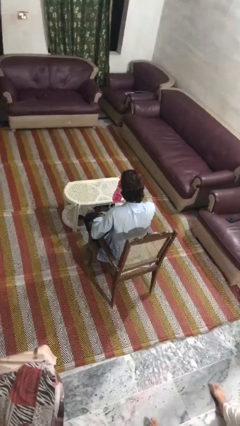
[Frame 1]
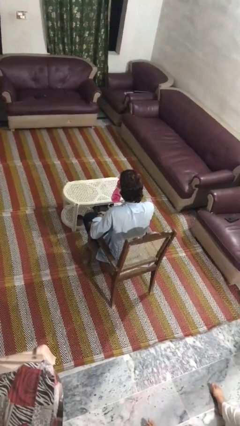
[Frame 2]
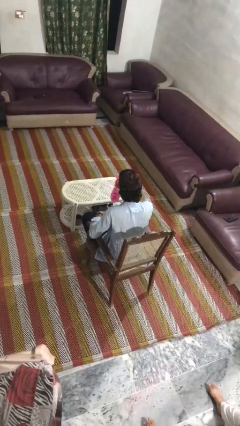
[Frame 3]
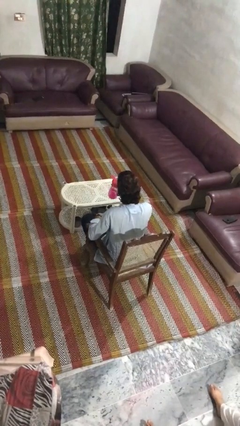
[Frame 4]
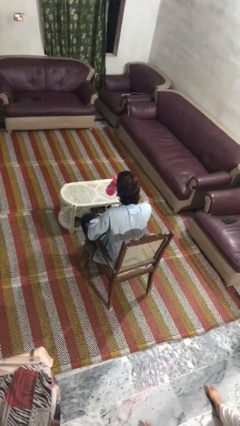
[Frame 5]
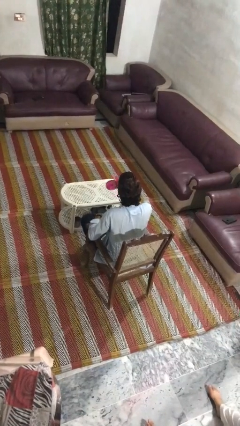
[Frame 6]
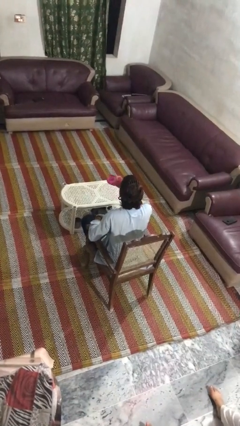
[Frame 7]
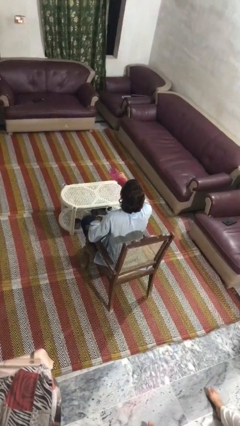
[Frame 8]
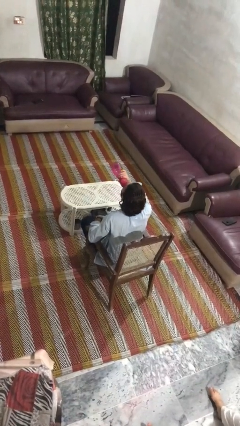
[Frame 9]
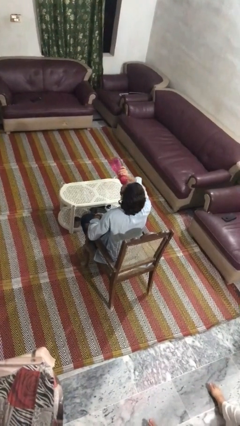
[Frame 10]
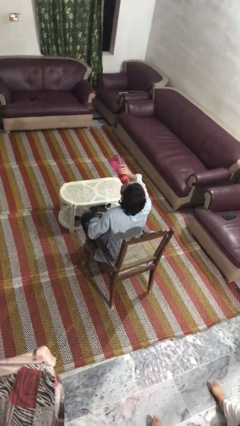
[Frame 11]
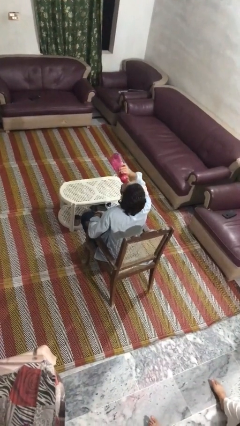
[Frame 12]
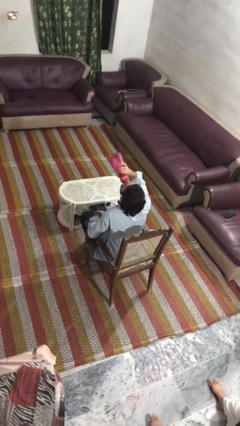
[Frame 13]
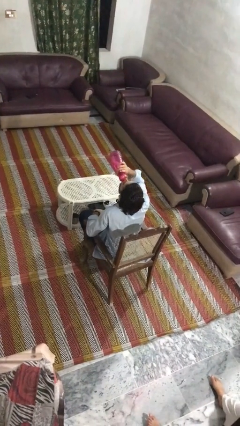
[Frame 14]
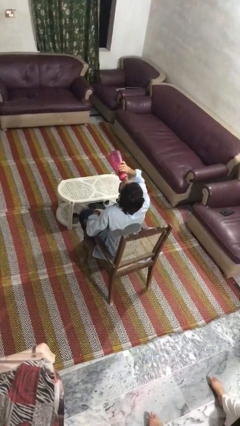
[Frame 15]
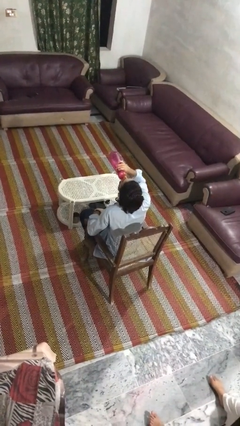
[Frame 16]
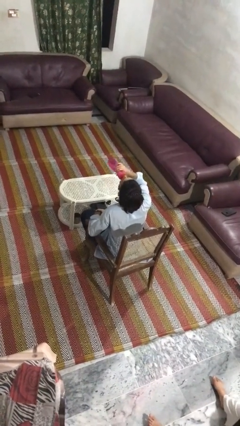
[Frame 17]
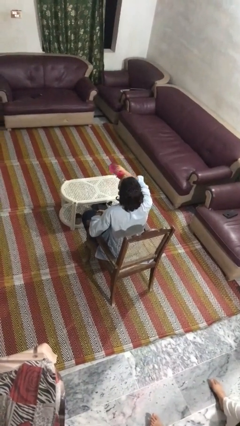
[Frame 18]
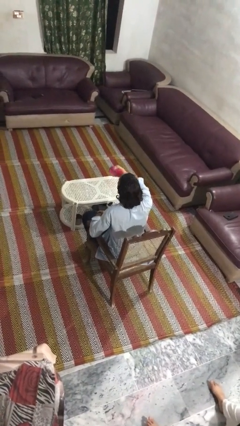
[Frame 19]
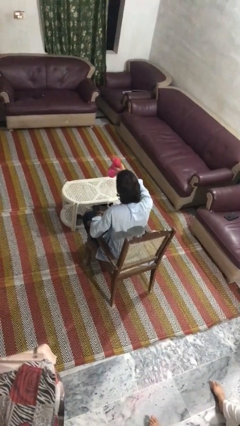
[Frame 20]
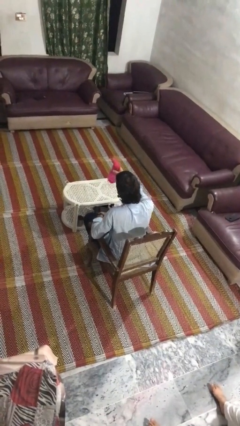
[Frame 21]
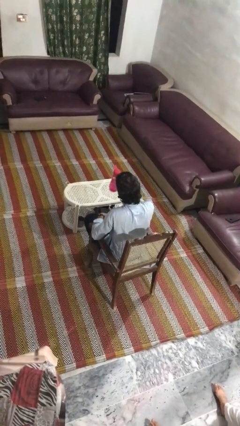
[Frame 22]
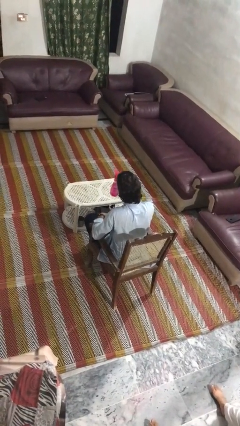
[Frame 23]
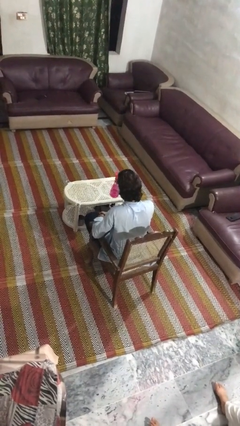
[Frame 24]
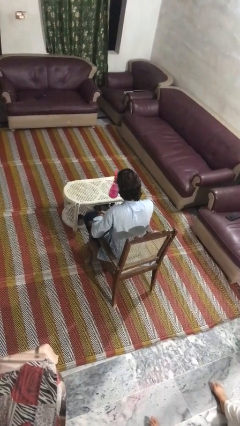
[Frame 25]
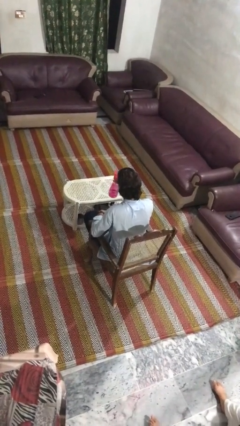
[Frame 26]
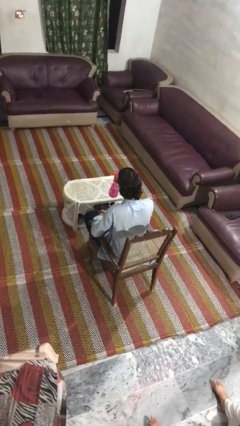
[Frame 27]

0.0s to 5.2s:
person drinks from bottle

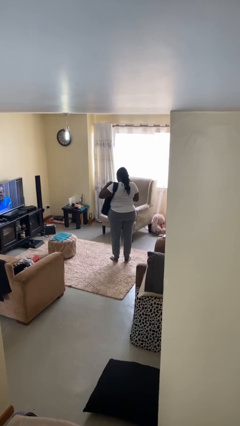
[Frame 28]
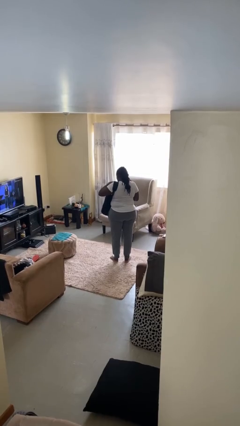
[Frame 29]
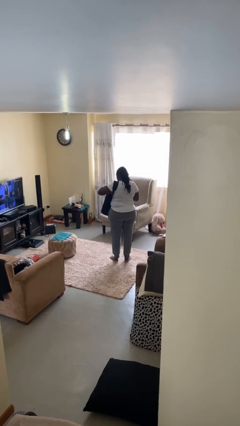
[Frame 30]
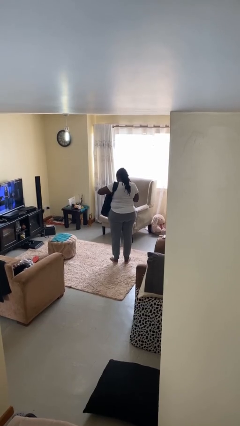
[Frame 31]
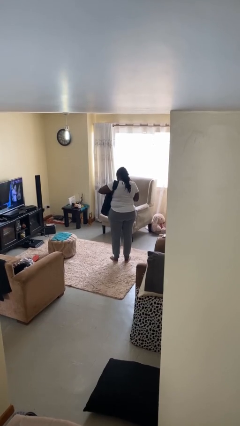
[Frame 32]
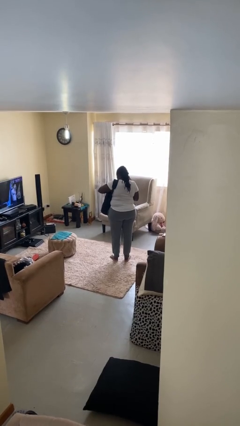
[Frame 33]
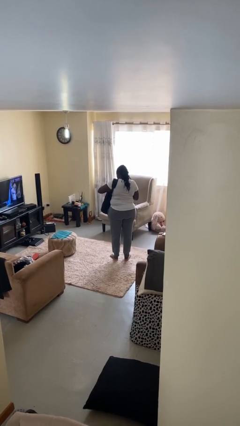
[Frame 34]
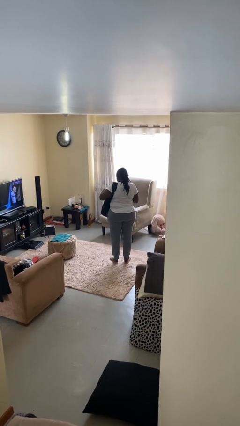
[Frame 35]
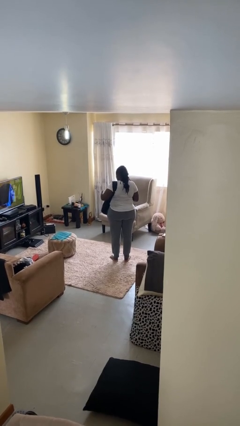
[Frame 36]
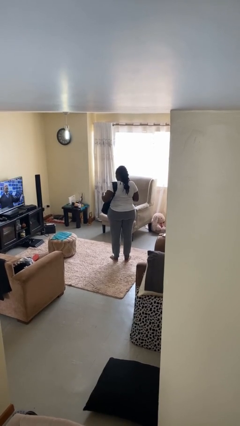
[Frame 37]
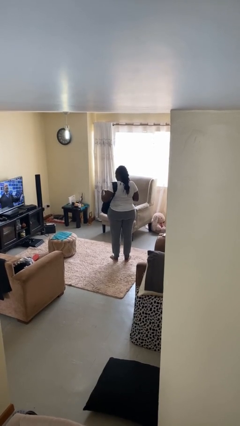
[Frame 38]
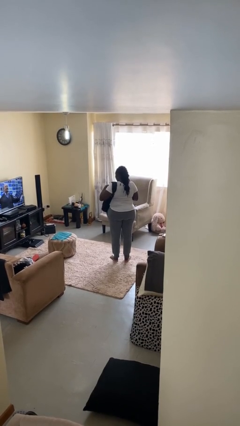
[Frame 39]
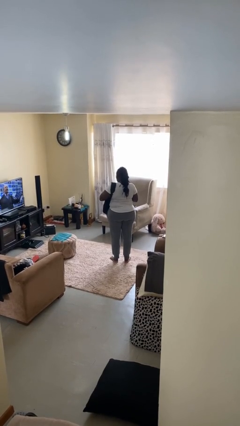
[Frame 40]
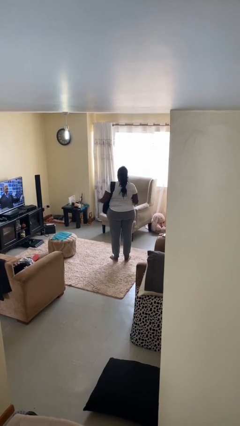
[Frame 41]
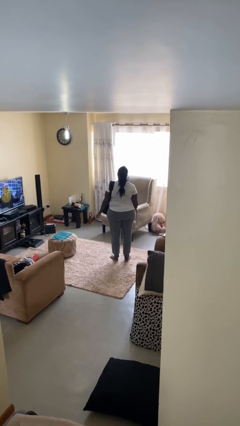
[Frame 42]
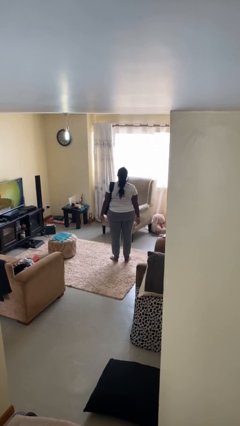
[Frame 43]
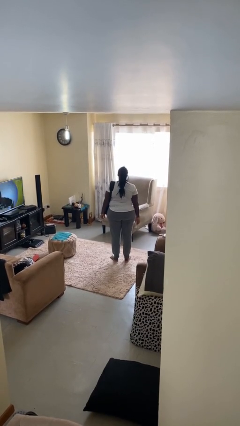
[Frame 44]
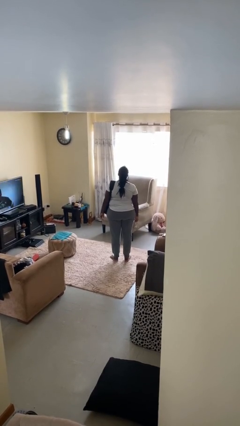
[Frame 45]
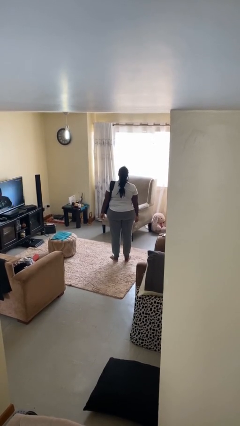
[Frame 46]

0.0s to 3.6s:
person puts object into backpack

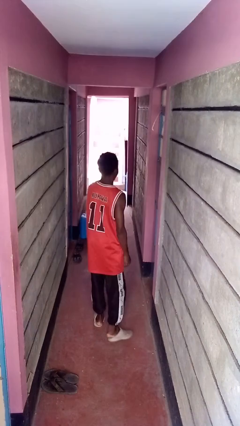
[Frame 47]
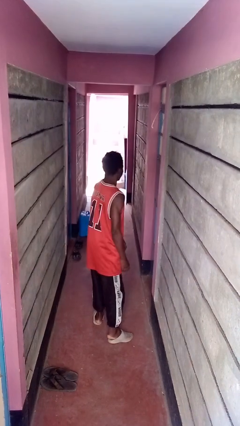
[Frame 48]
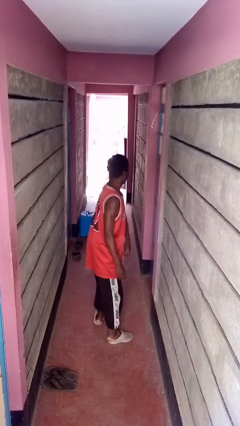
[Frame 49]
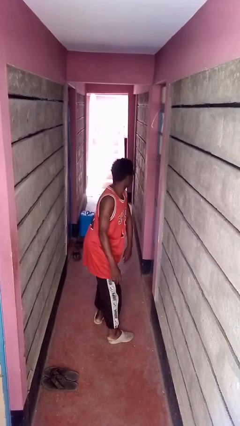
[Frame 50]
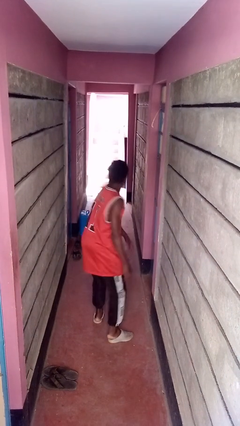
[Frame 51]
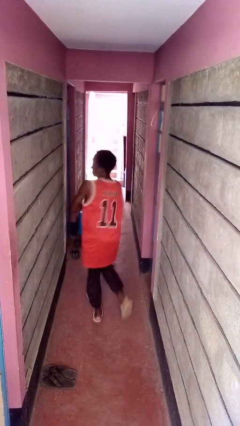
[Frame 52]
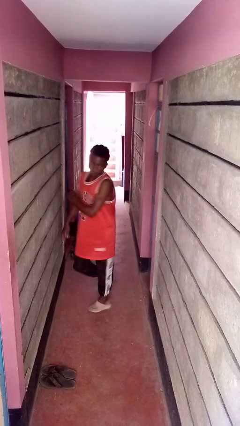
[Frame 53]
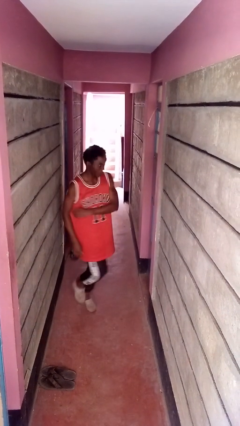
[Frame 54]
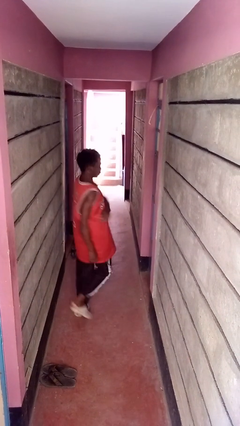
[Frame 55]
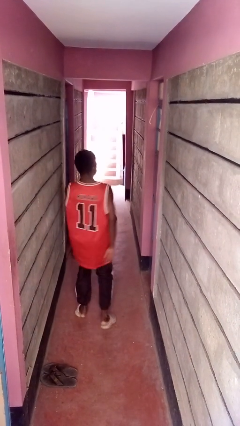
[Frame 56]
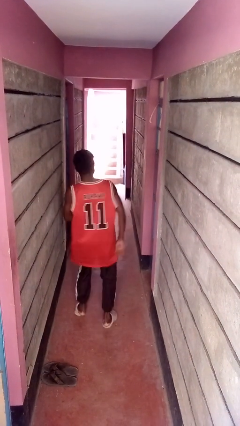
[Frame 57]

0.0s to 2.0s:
person twirls

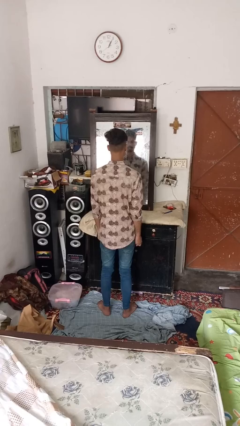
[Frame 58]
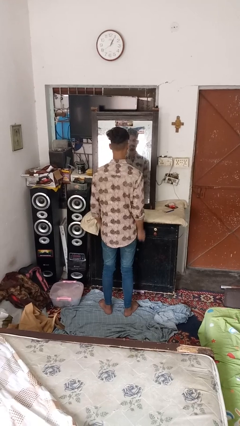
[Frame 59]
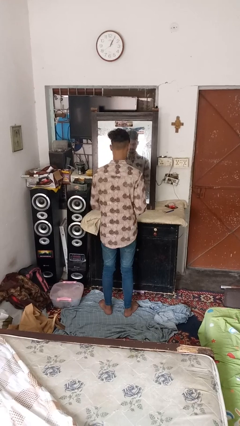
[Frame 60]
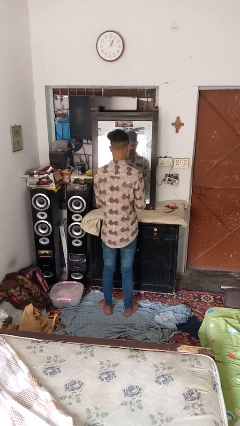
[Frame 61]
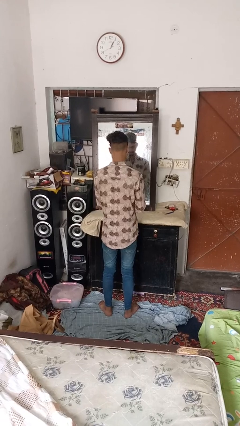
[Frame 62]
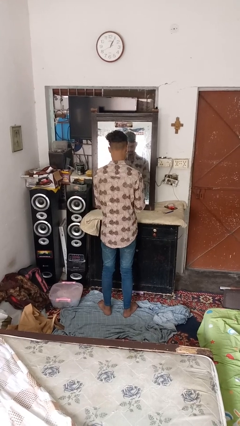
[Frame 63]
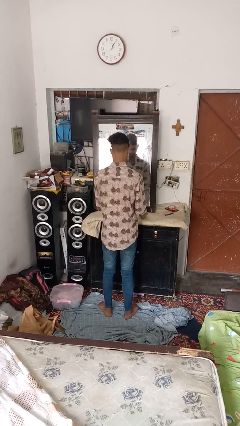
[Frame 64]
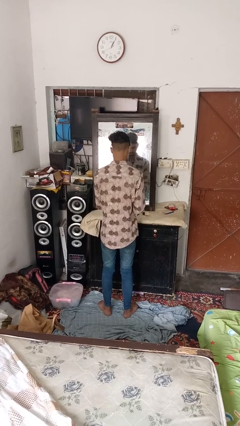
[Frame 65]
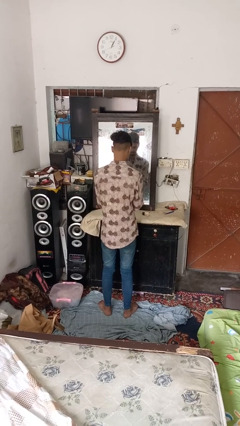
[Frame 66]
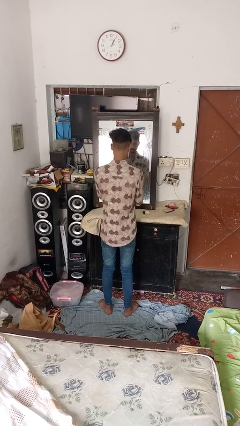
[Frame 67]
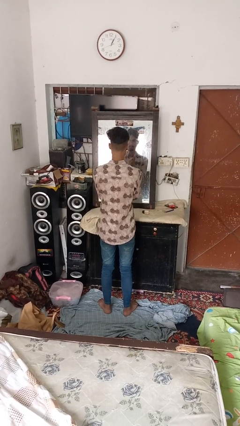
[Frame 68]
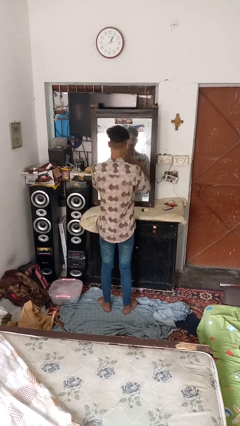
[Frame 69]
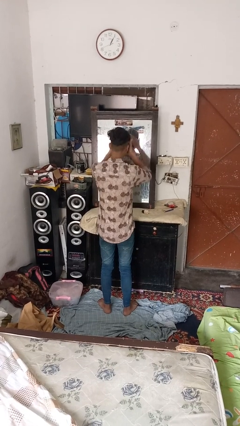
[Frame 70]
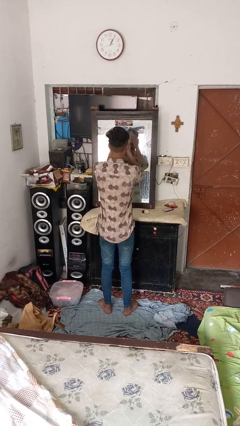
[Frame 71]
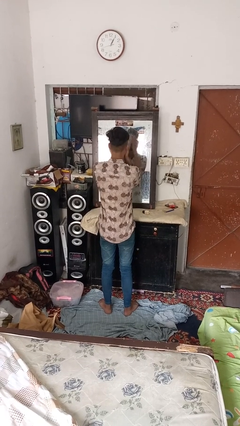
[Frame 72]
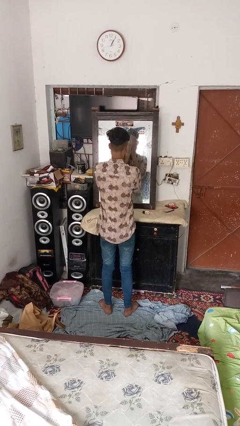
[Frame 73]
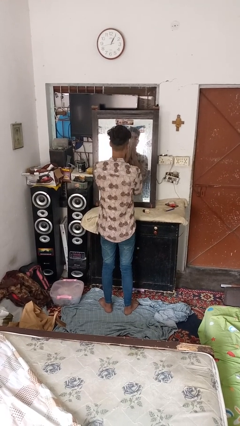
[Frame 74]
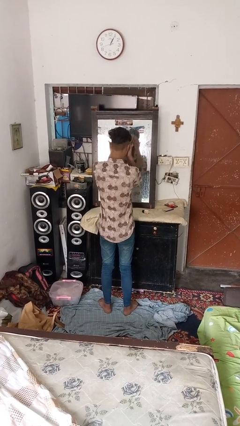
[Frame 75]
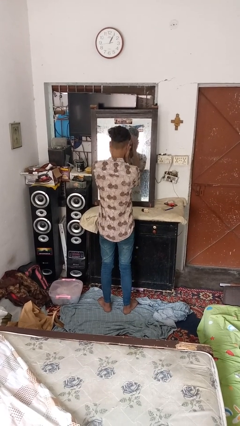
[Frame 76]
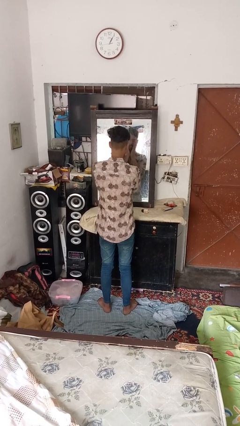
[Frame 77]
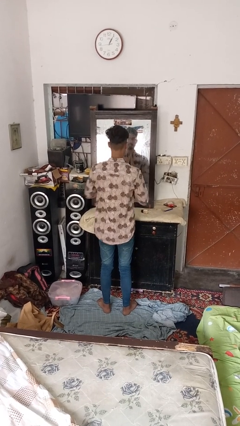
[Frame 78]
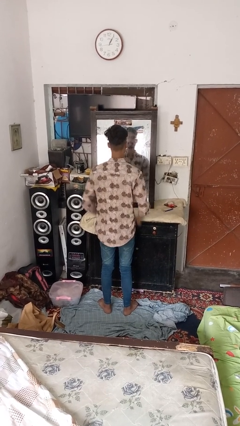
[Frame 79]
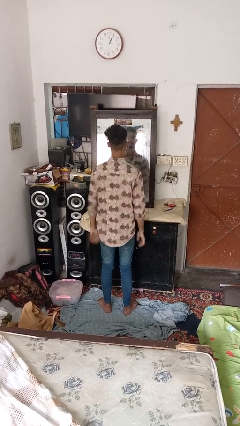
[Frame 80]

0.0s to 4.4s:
person applies foundation makeup

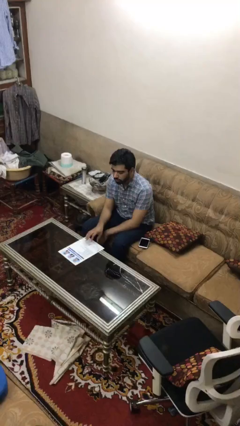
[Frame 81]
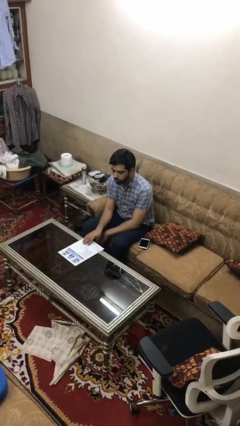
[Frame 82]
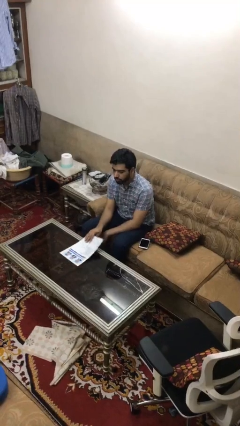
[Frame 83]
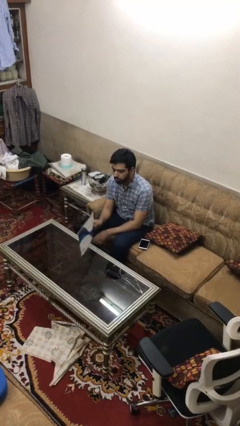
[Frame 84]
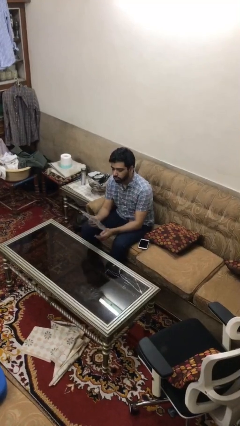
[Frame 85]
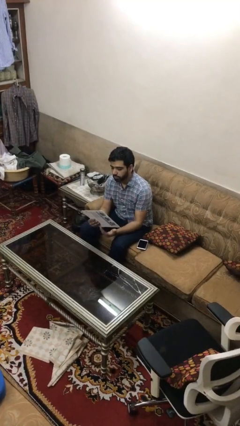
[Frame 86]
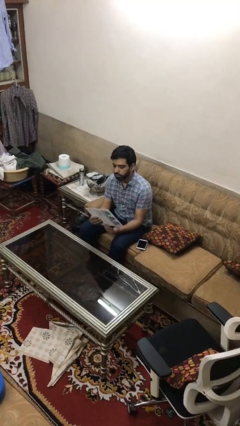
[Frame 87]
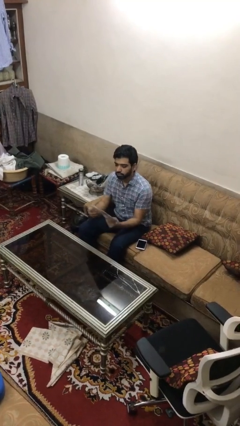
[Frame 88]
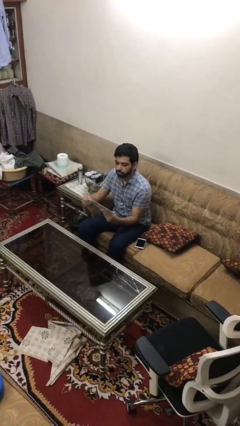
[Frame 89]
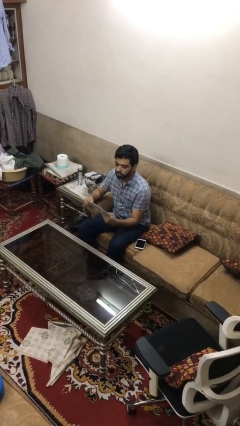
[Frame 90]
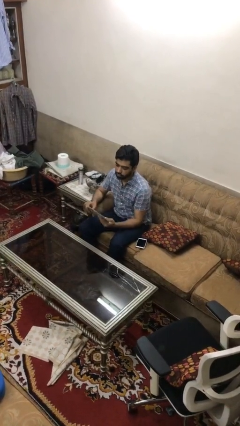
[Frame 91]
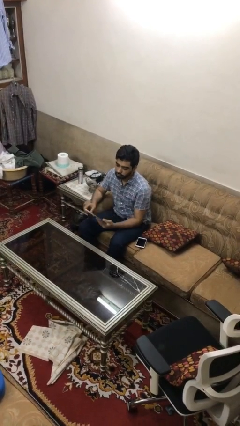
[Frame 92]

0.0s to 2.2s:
person picks up object from table

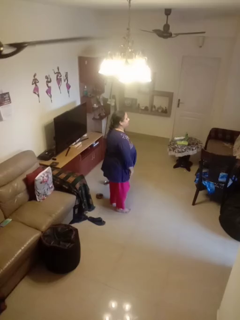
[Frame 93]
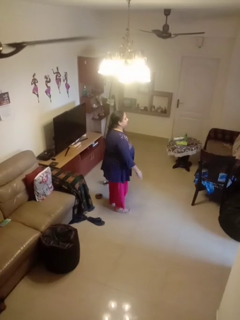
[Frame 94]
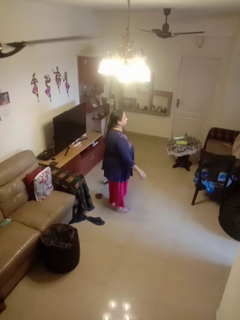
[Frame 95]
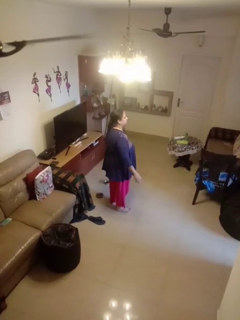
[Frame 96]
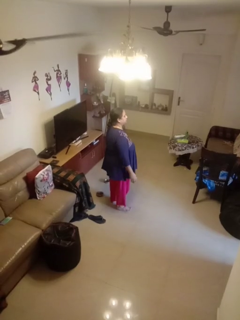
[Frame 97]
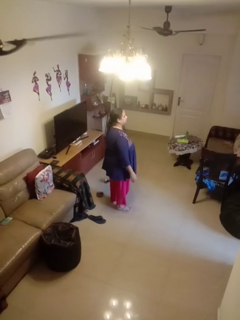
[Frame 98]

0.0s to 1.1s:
person slaps hands on thighs
